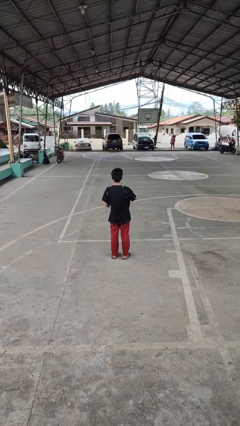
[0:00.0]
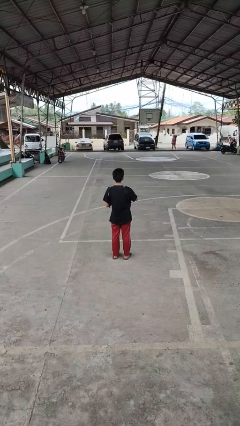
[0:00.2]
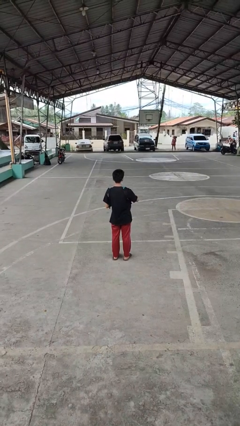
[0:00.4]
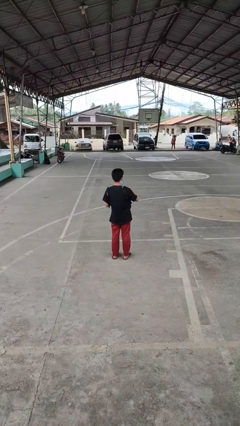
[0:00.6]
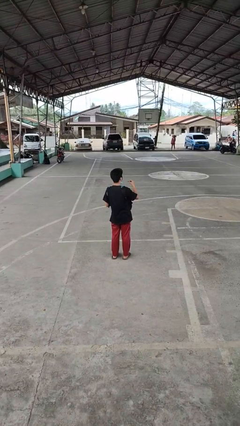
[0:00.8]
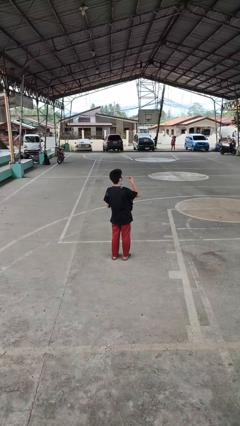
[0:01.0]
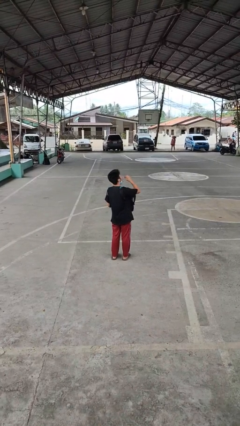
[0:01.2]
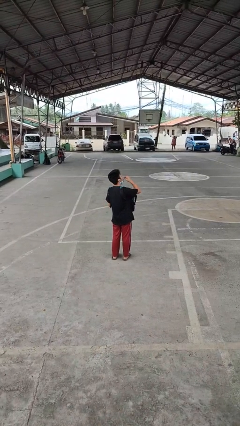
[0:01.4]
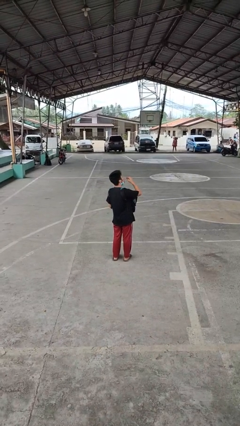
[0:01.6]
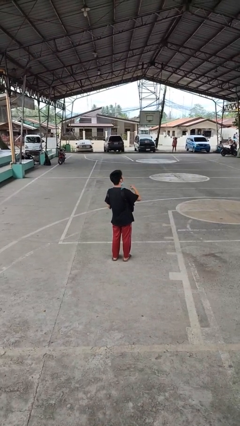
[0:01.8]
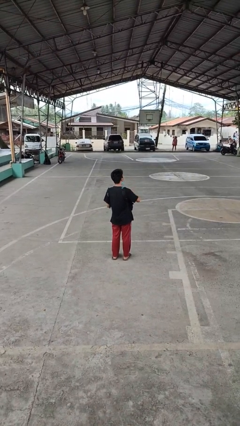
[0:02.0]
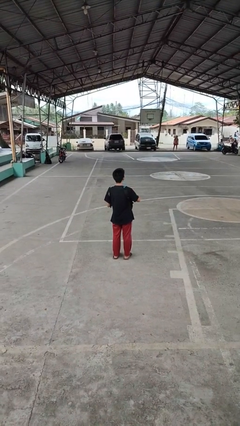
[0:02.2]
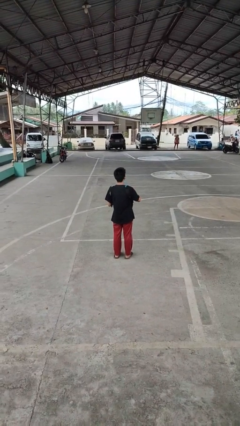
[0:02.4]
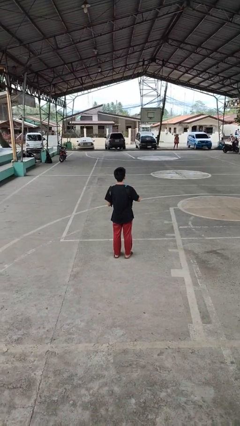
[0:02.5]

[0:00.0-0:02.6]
person eats snack from bag

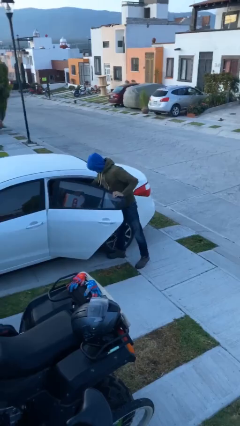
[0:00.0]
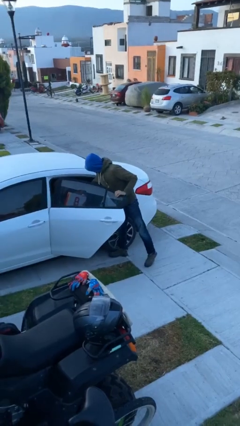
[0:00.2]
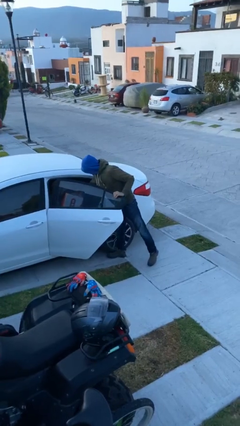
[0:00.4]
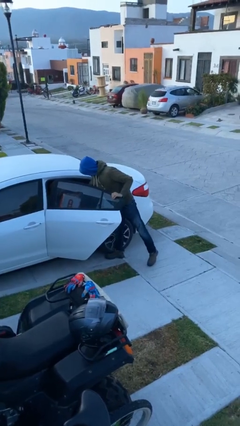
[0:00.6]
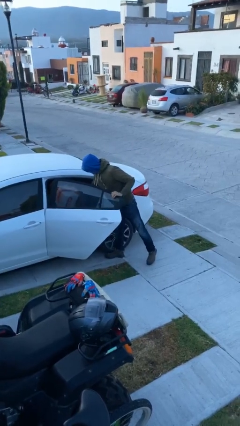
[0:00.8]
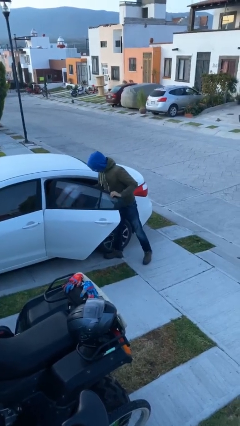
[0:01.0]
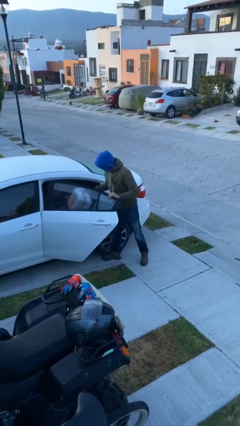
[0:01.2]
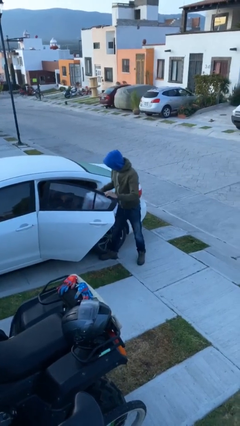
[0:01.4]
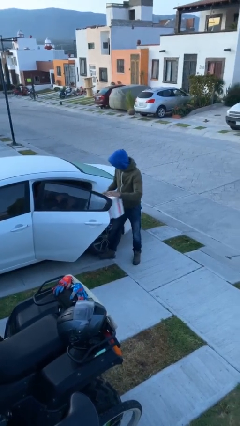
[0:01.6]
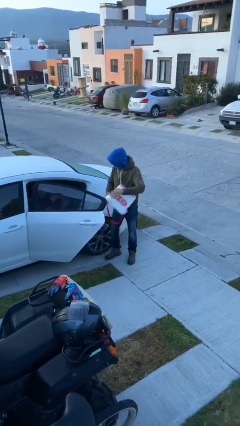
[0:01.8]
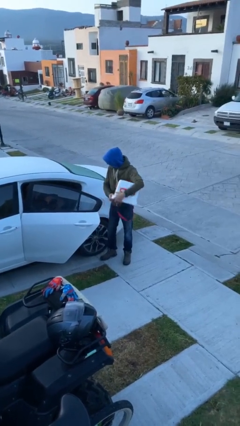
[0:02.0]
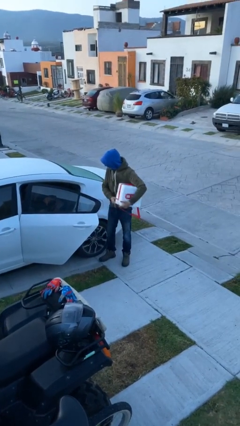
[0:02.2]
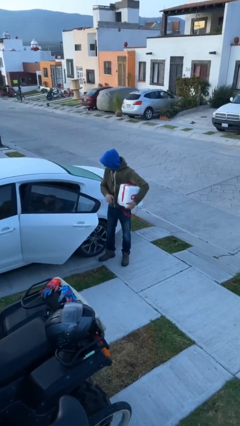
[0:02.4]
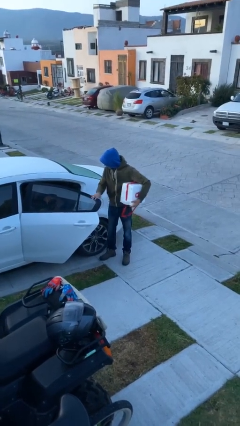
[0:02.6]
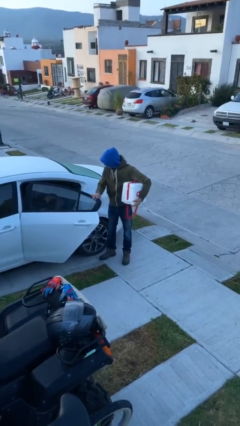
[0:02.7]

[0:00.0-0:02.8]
person unloads car

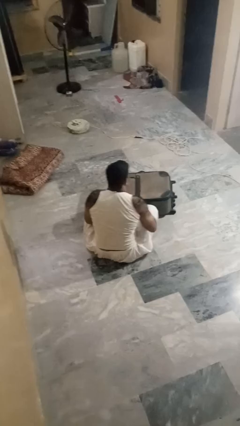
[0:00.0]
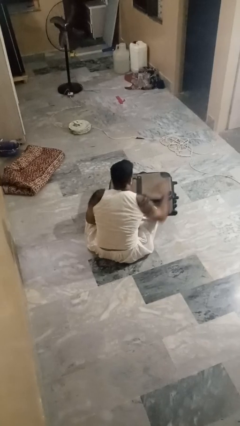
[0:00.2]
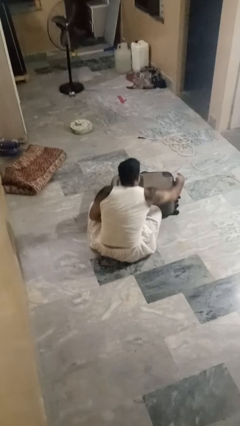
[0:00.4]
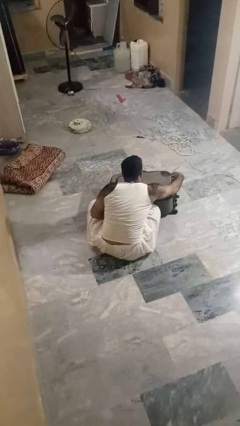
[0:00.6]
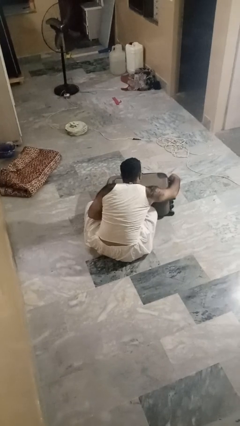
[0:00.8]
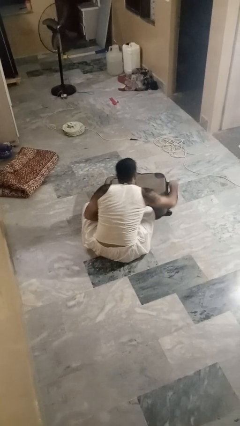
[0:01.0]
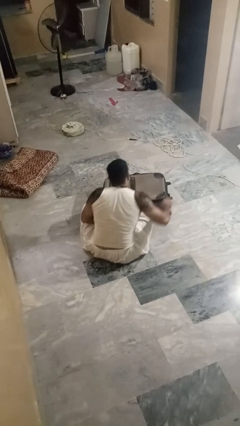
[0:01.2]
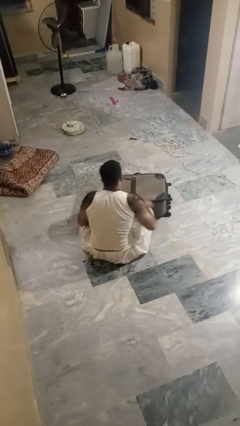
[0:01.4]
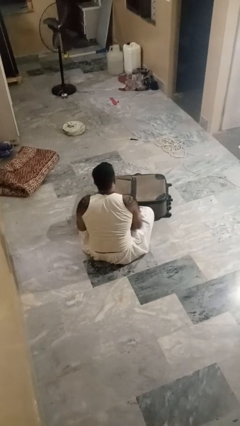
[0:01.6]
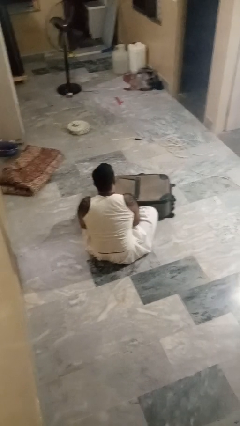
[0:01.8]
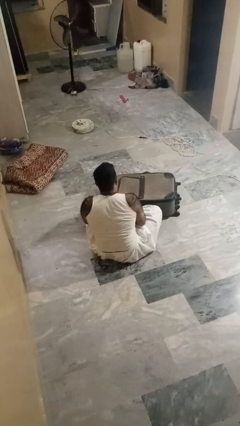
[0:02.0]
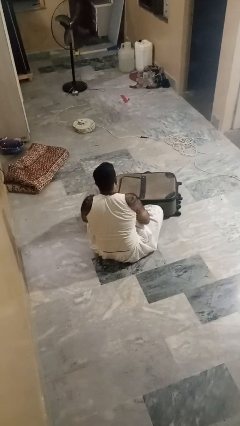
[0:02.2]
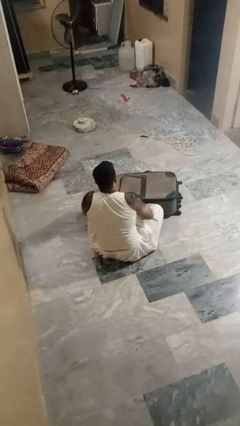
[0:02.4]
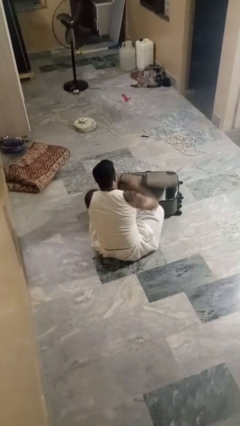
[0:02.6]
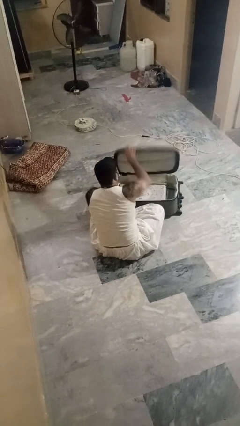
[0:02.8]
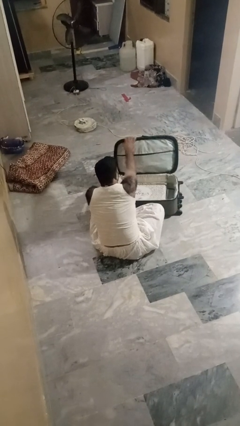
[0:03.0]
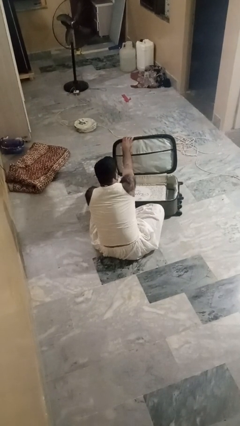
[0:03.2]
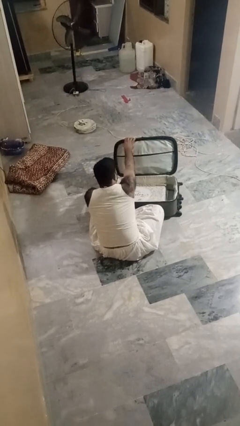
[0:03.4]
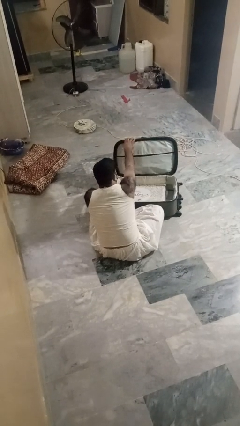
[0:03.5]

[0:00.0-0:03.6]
person opens suitcase

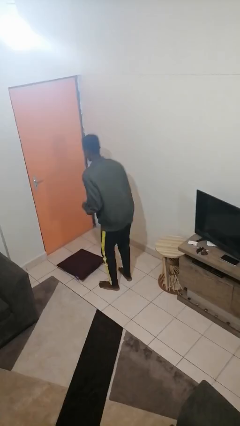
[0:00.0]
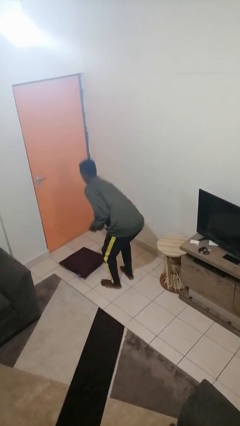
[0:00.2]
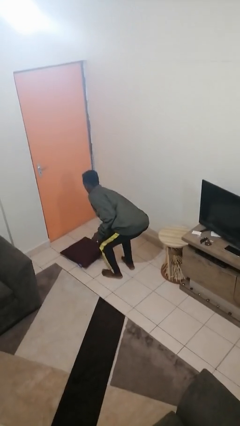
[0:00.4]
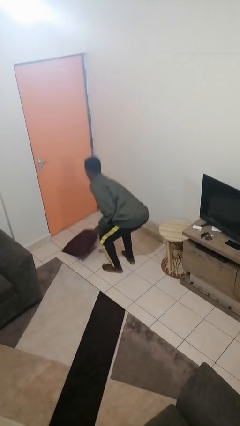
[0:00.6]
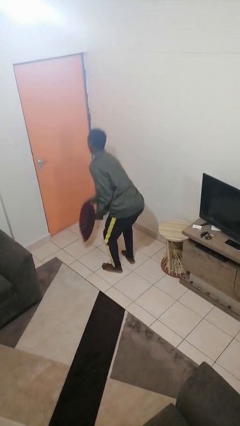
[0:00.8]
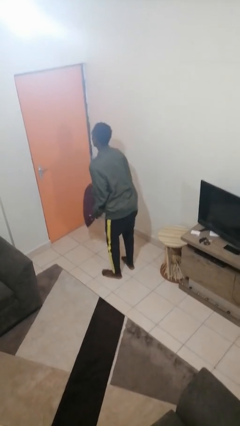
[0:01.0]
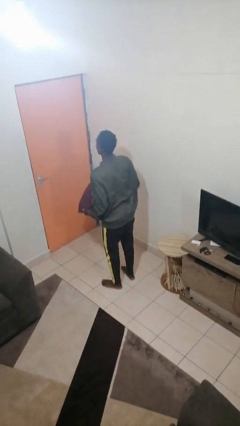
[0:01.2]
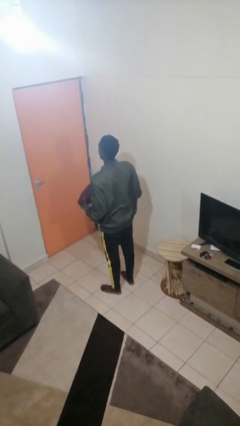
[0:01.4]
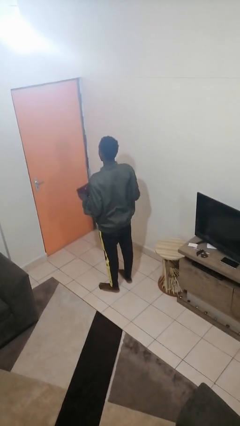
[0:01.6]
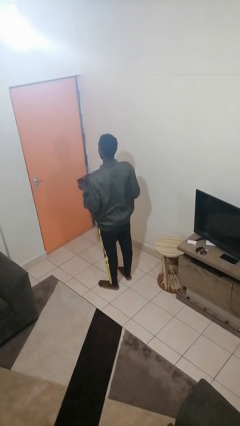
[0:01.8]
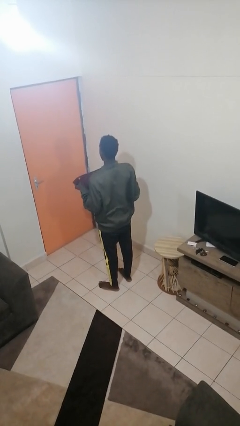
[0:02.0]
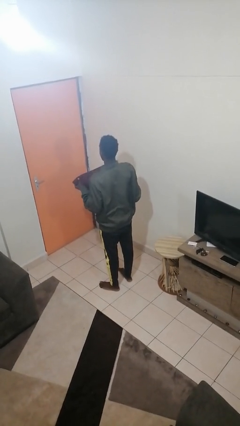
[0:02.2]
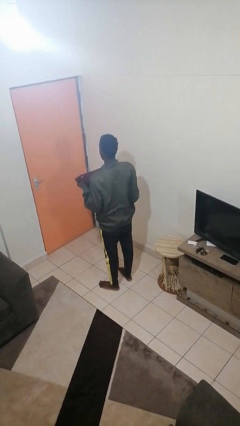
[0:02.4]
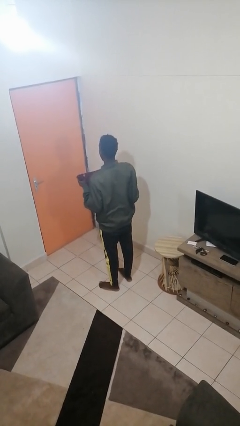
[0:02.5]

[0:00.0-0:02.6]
person picks up object from floor

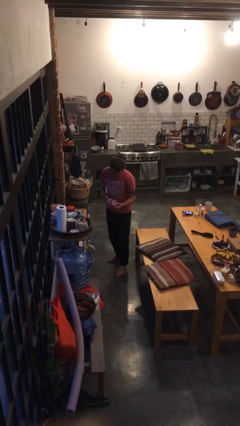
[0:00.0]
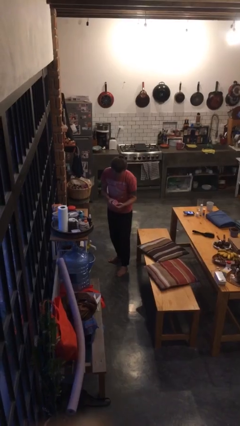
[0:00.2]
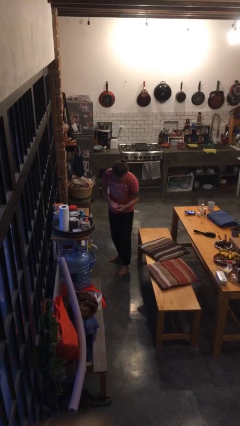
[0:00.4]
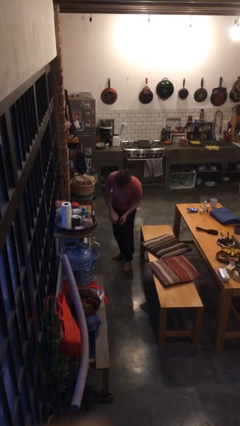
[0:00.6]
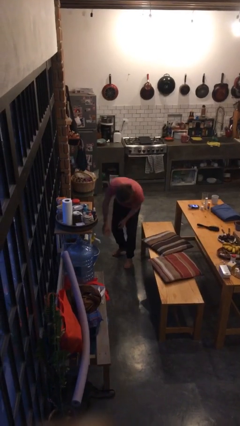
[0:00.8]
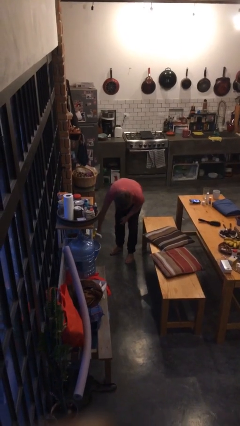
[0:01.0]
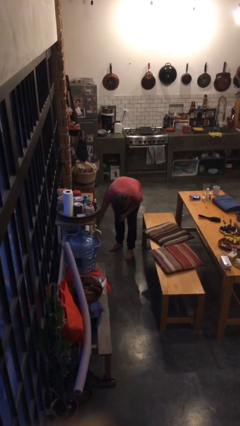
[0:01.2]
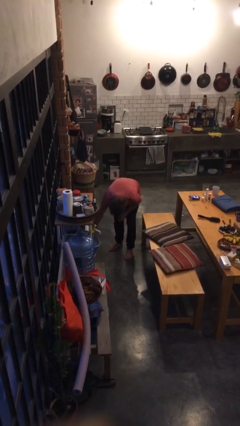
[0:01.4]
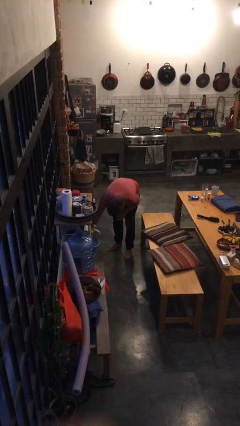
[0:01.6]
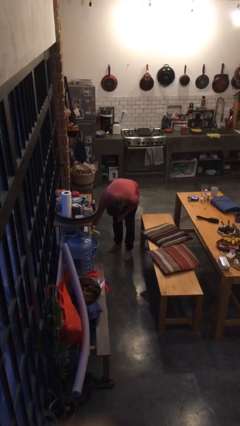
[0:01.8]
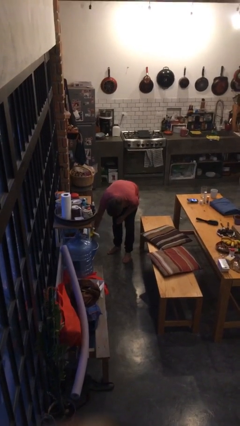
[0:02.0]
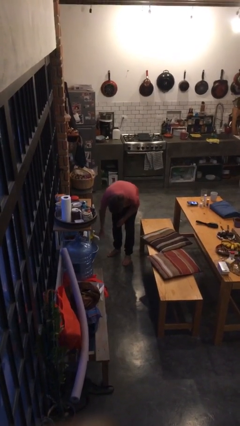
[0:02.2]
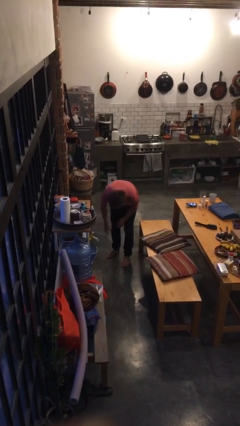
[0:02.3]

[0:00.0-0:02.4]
person puts down object into cabinet

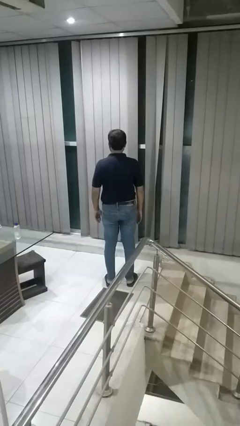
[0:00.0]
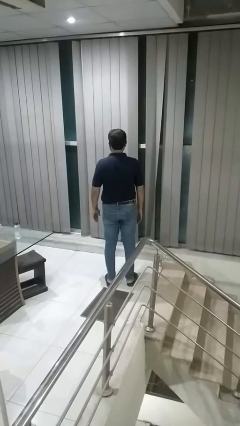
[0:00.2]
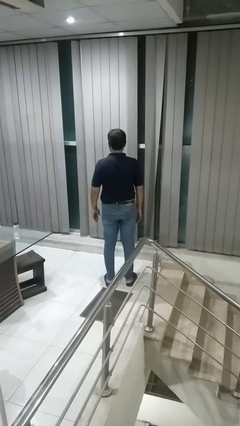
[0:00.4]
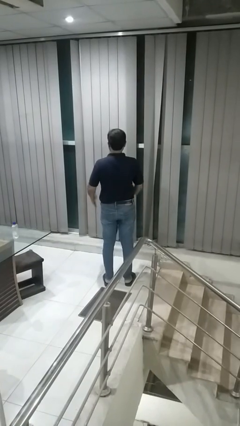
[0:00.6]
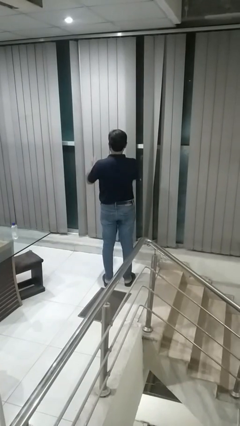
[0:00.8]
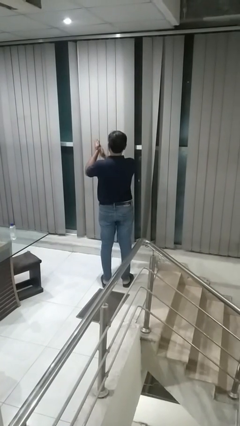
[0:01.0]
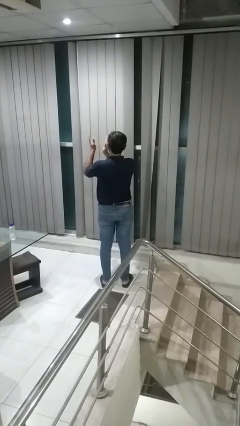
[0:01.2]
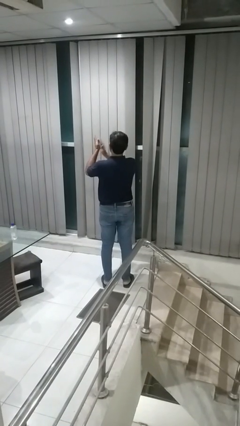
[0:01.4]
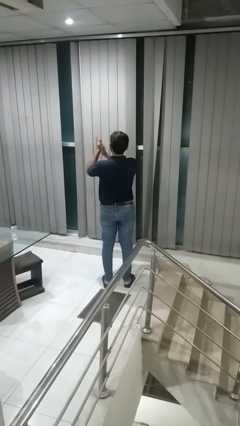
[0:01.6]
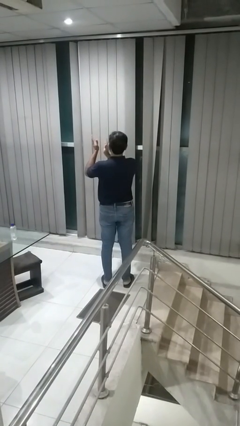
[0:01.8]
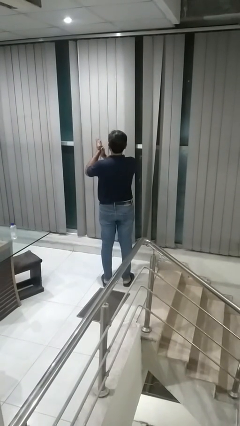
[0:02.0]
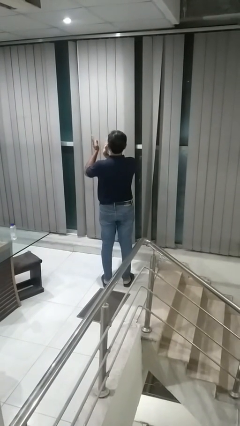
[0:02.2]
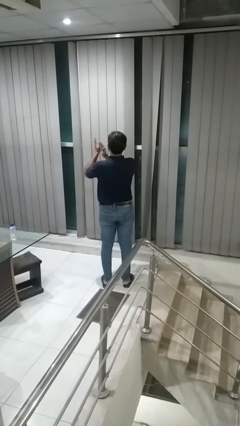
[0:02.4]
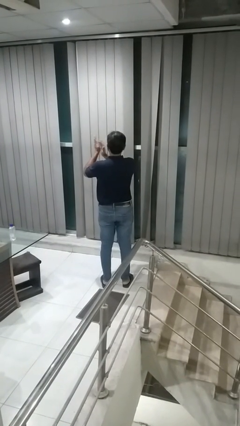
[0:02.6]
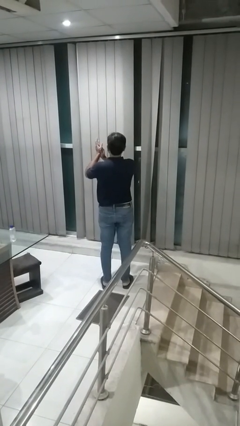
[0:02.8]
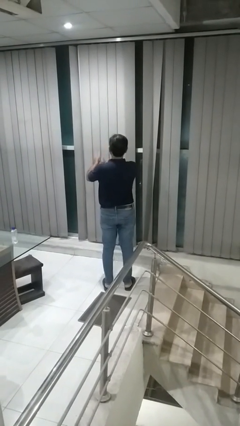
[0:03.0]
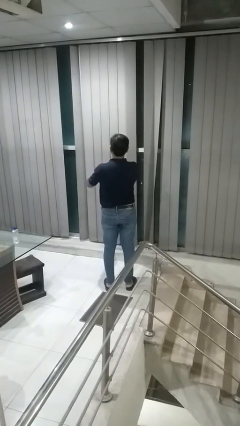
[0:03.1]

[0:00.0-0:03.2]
person claps hands
